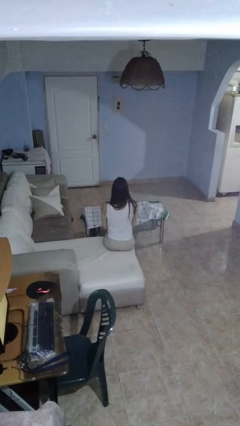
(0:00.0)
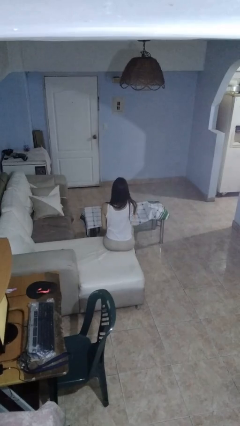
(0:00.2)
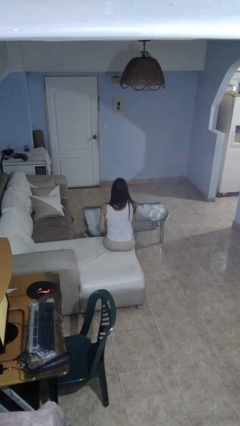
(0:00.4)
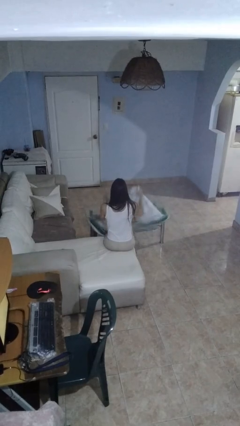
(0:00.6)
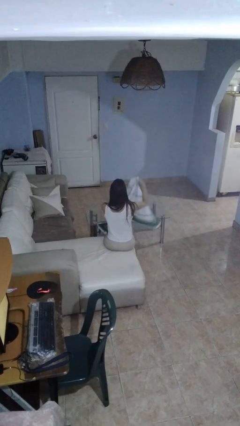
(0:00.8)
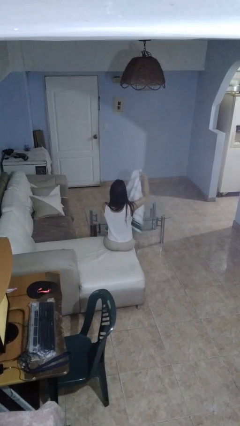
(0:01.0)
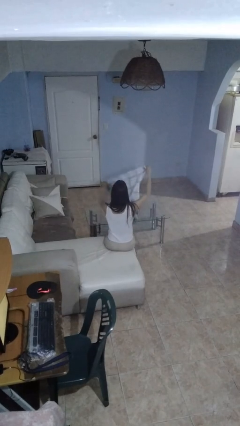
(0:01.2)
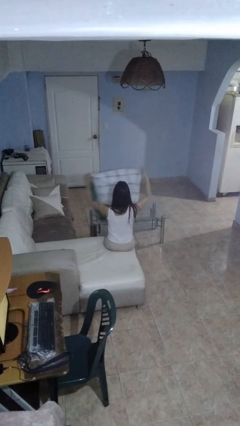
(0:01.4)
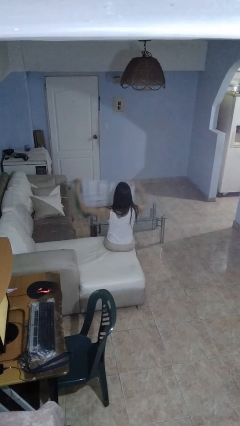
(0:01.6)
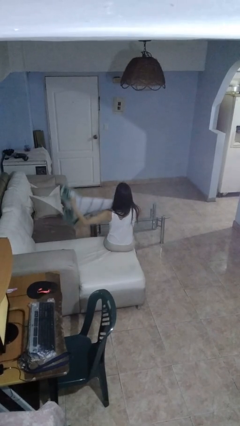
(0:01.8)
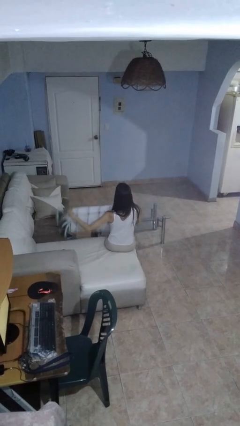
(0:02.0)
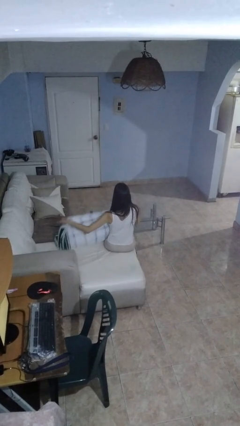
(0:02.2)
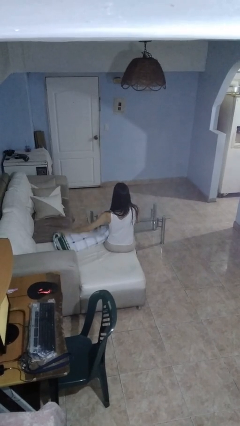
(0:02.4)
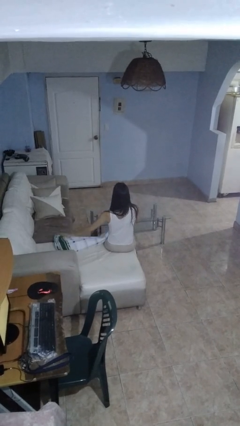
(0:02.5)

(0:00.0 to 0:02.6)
person folds tablecloth

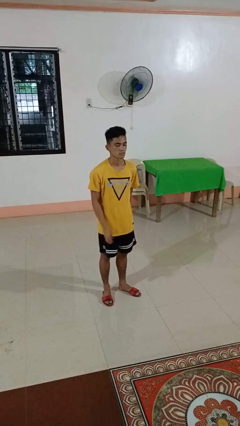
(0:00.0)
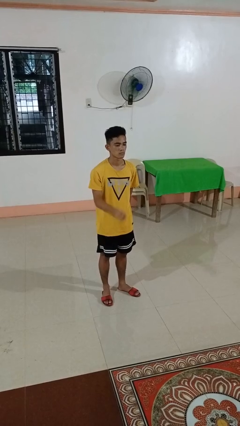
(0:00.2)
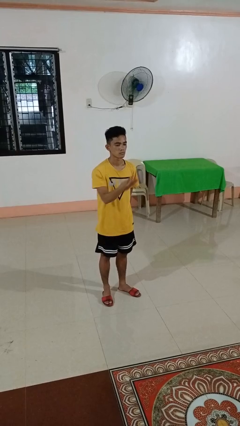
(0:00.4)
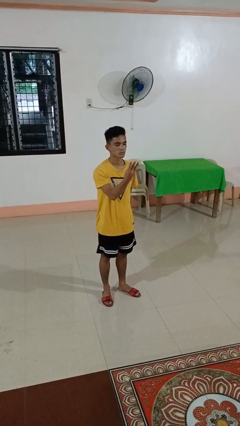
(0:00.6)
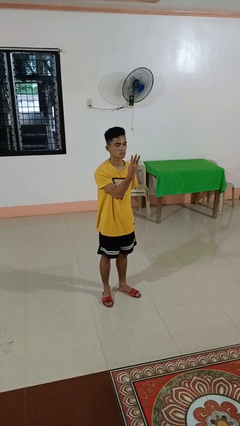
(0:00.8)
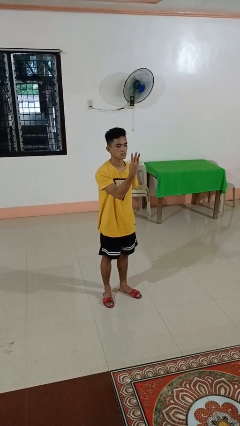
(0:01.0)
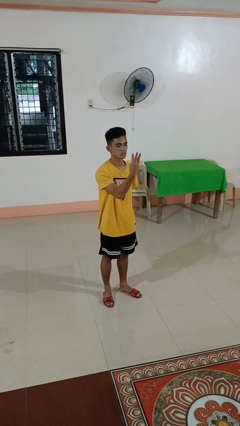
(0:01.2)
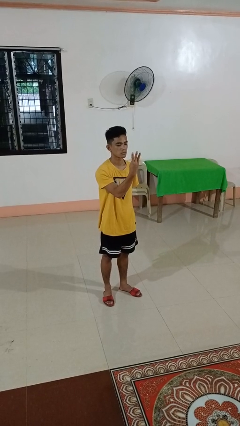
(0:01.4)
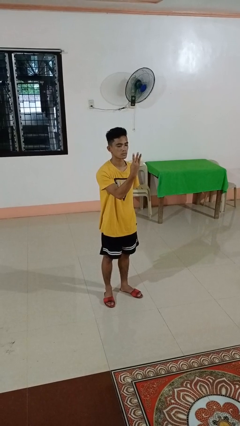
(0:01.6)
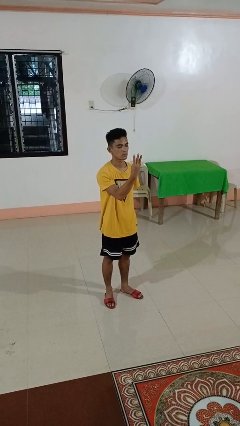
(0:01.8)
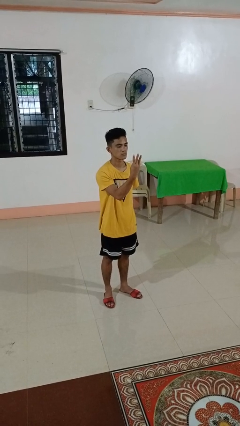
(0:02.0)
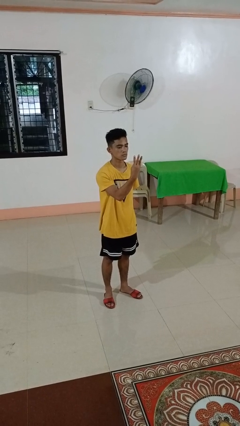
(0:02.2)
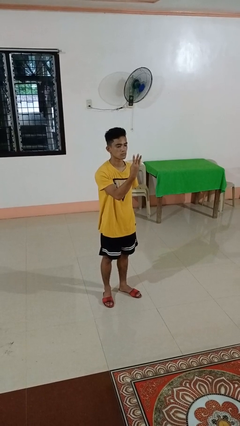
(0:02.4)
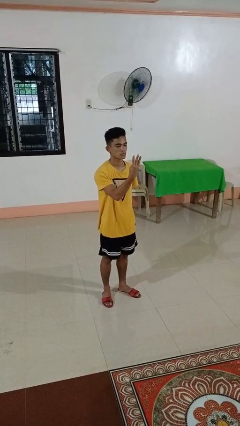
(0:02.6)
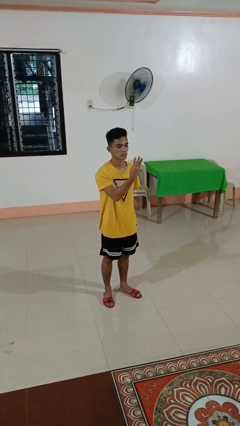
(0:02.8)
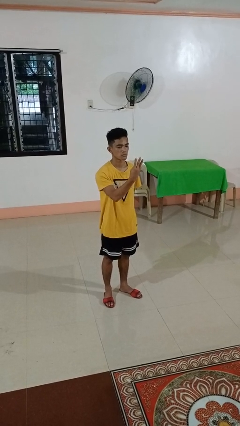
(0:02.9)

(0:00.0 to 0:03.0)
person gestures number three

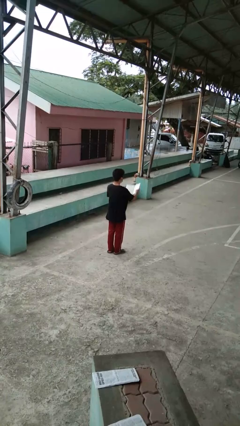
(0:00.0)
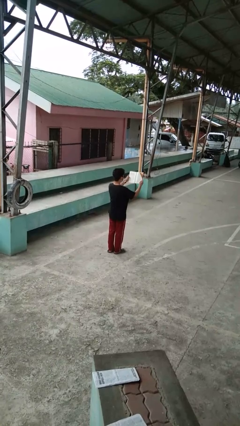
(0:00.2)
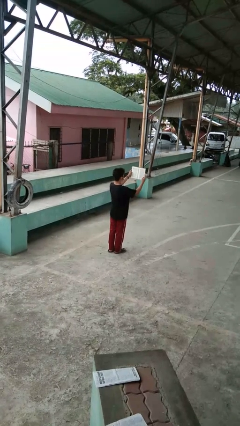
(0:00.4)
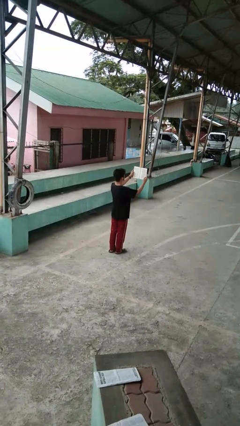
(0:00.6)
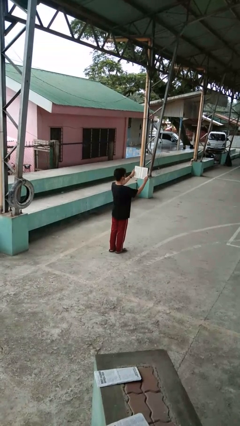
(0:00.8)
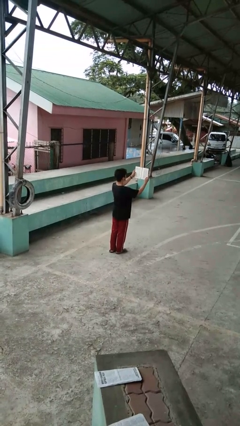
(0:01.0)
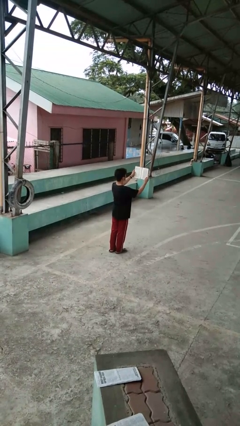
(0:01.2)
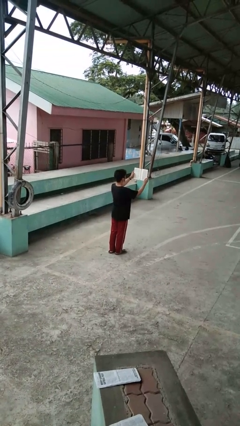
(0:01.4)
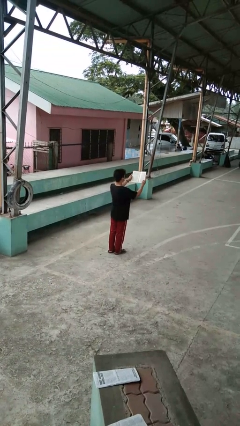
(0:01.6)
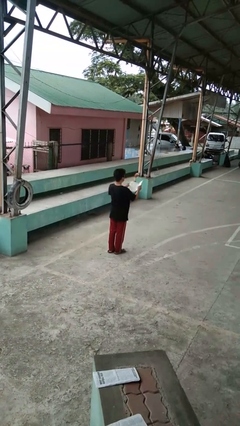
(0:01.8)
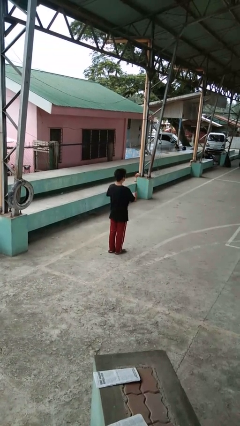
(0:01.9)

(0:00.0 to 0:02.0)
person reads book

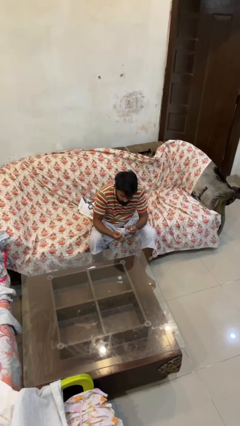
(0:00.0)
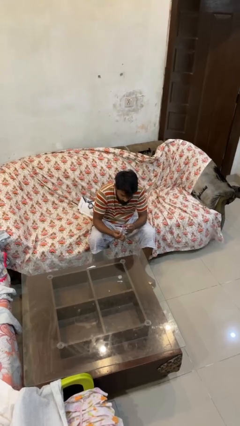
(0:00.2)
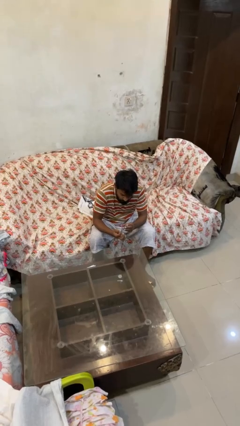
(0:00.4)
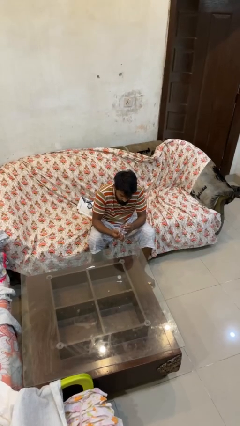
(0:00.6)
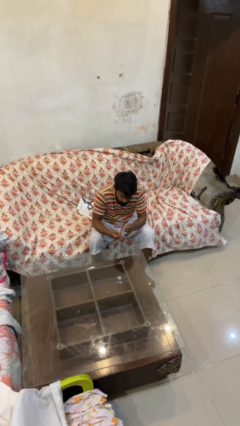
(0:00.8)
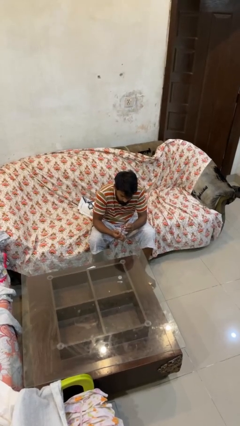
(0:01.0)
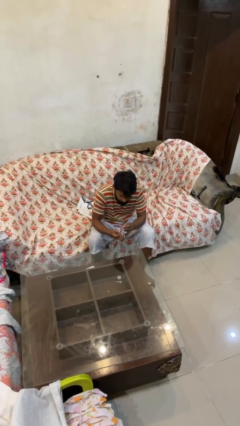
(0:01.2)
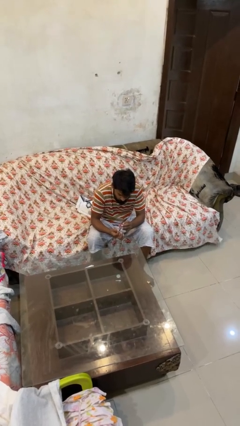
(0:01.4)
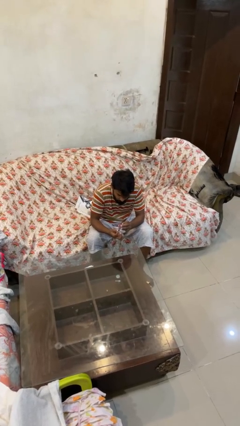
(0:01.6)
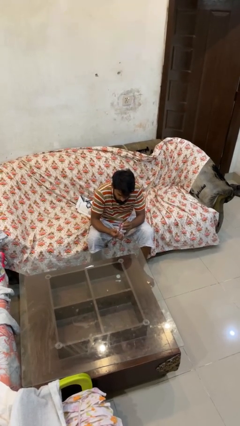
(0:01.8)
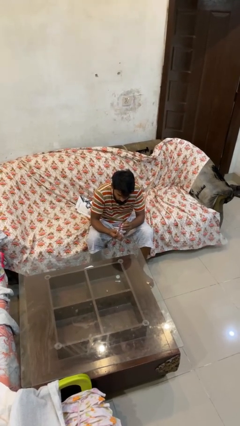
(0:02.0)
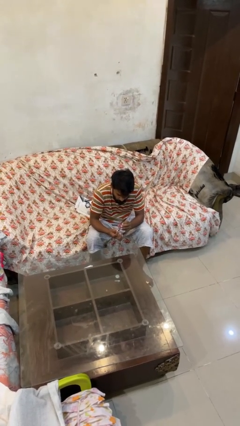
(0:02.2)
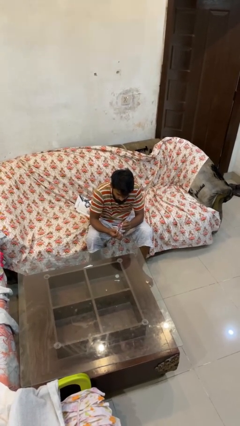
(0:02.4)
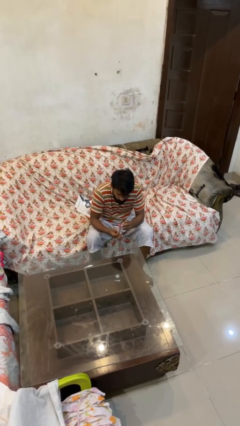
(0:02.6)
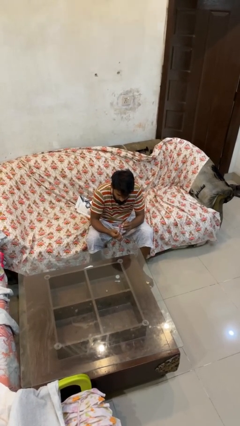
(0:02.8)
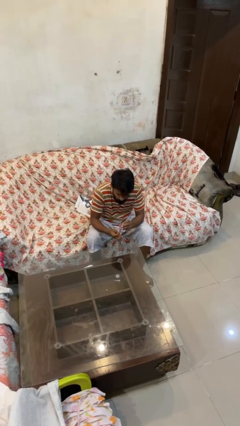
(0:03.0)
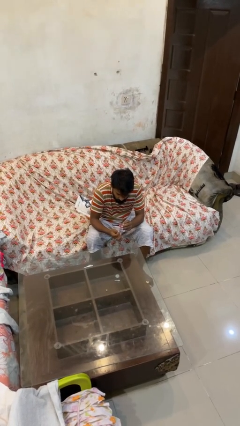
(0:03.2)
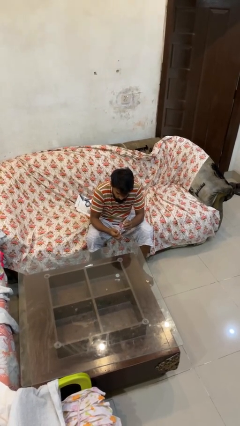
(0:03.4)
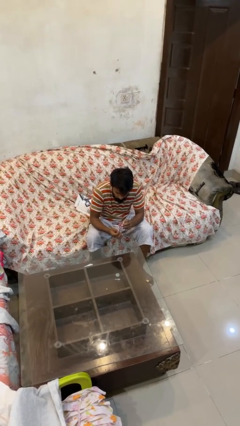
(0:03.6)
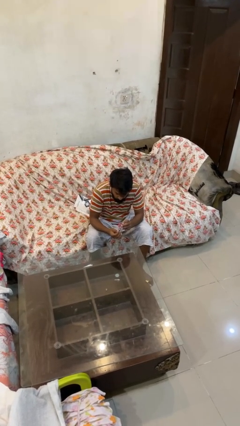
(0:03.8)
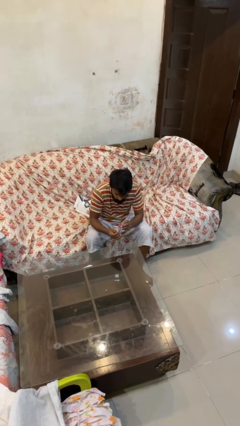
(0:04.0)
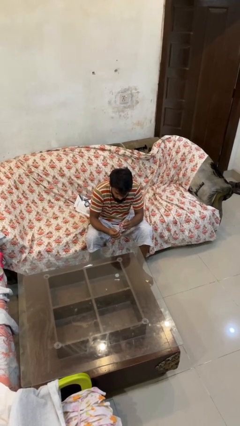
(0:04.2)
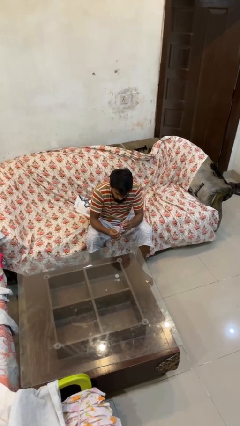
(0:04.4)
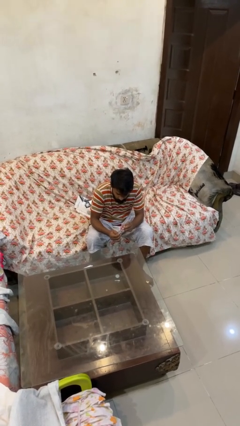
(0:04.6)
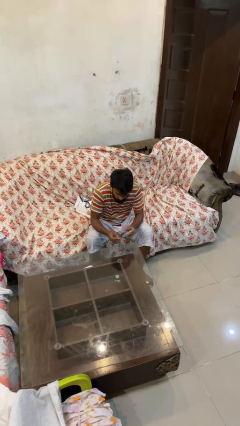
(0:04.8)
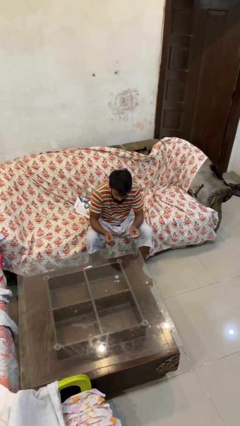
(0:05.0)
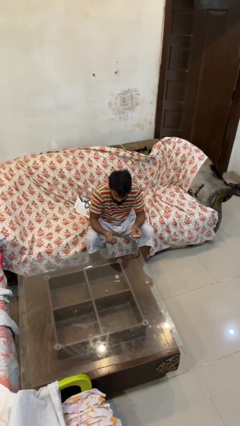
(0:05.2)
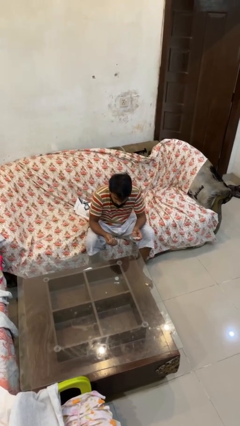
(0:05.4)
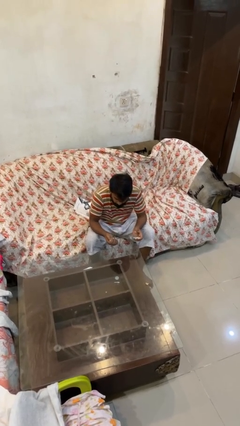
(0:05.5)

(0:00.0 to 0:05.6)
person clips fingernails

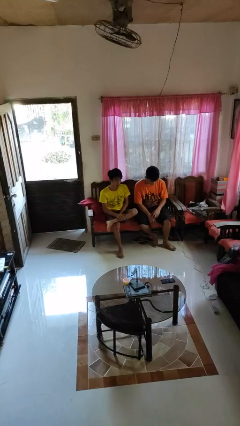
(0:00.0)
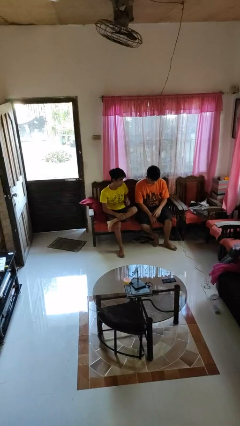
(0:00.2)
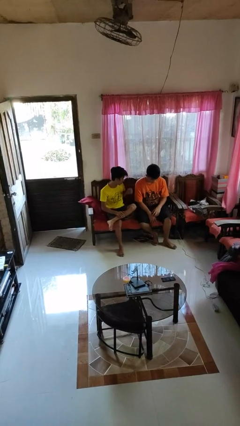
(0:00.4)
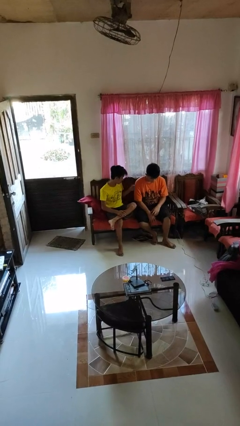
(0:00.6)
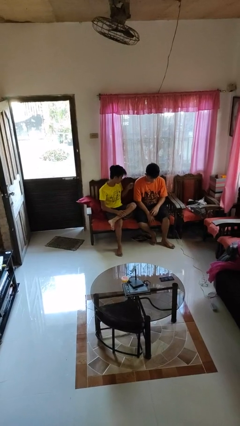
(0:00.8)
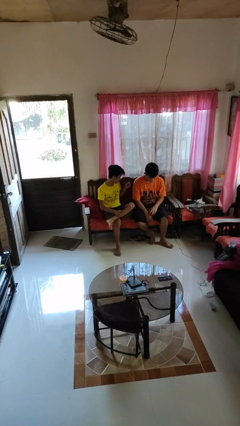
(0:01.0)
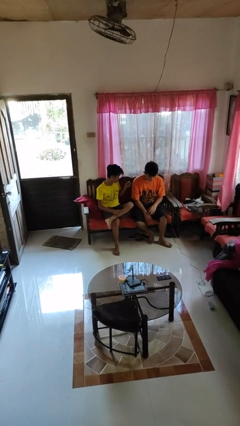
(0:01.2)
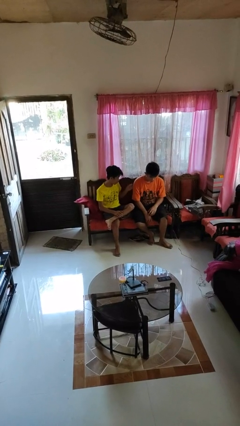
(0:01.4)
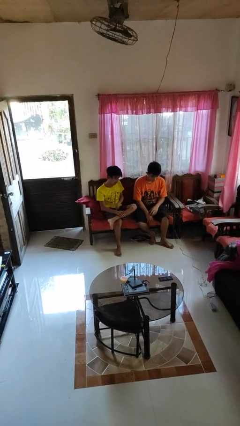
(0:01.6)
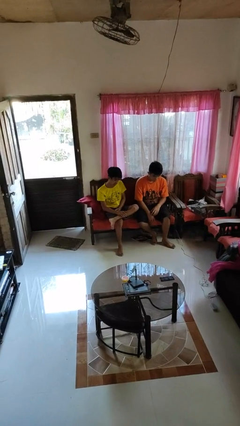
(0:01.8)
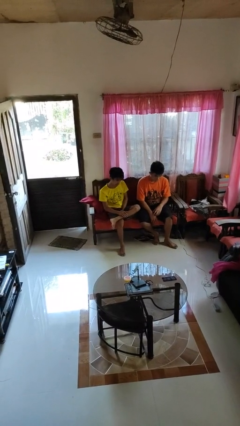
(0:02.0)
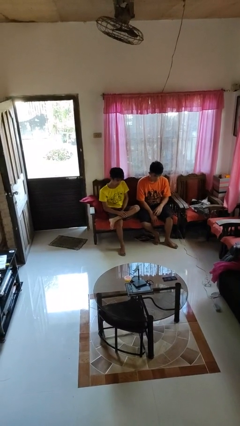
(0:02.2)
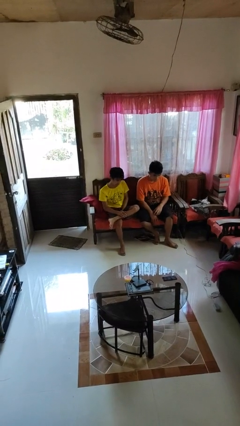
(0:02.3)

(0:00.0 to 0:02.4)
person pounds shoulders of person

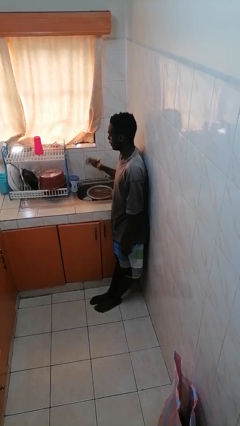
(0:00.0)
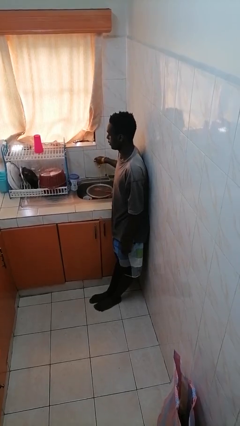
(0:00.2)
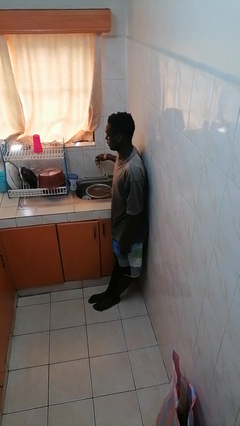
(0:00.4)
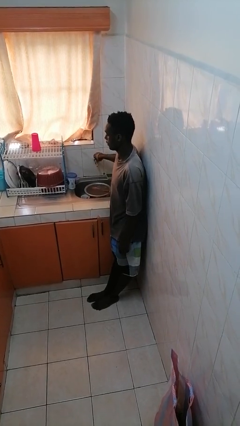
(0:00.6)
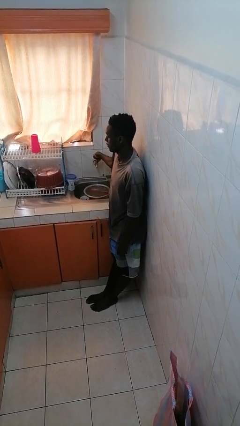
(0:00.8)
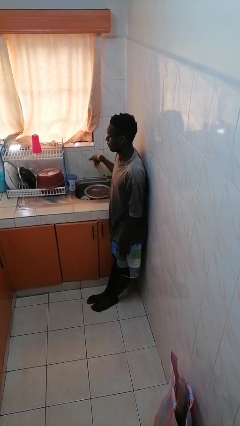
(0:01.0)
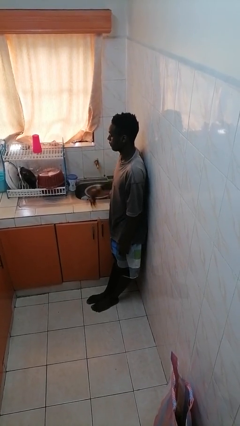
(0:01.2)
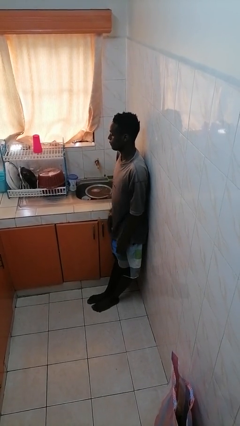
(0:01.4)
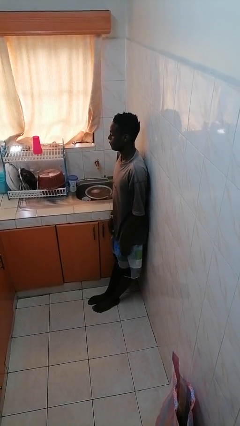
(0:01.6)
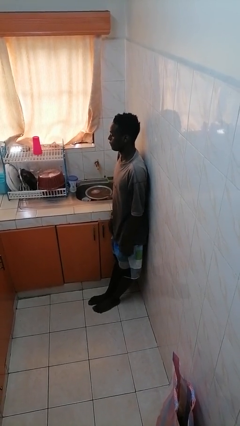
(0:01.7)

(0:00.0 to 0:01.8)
person turns off faucet
